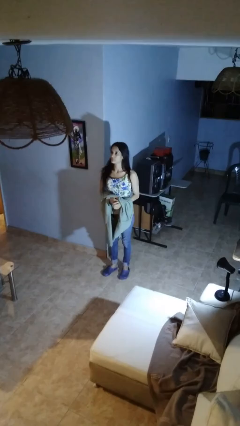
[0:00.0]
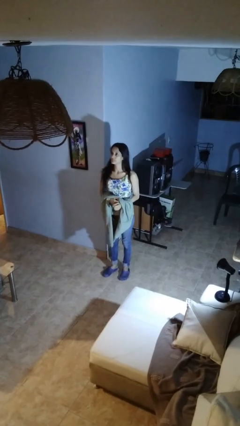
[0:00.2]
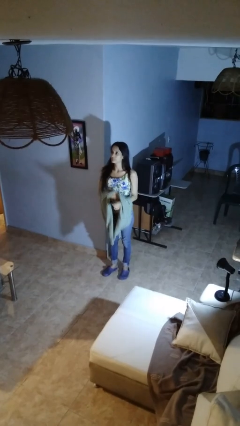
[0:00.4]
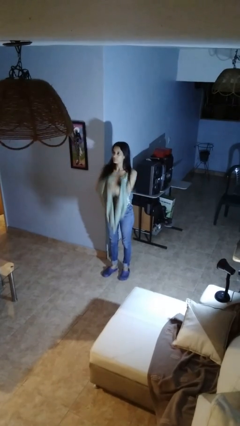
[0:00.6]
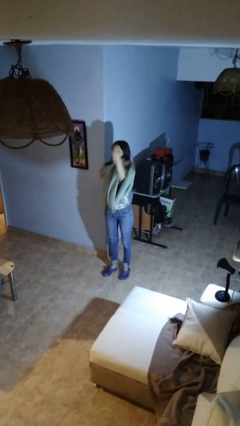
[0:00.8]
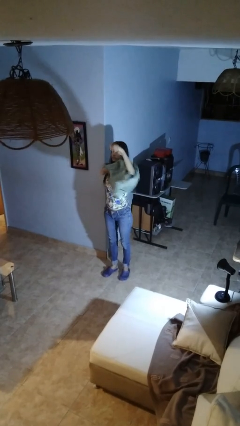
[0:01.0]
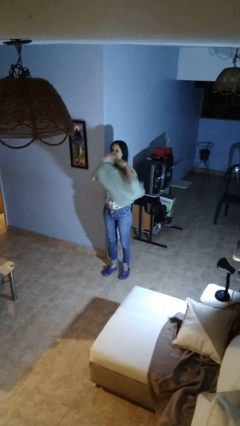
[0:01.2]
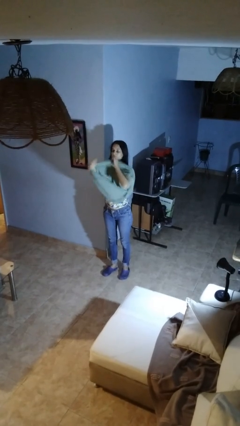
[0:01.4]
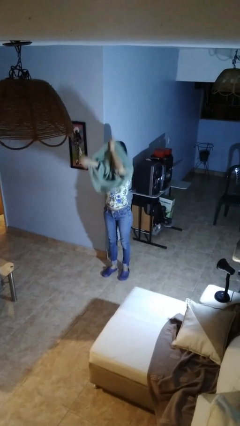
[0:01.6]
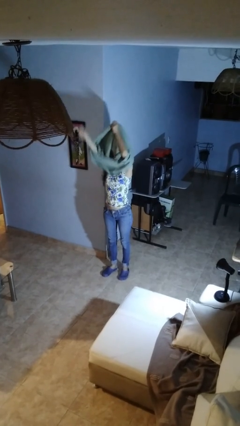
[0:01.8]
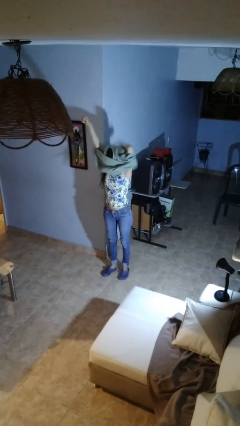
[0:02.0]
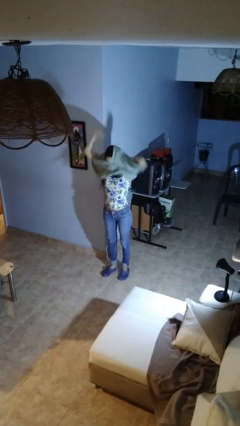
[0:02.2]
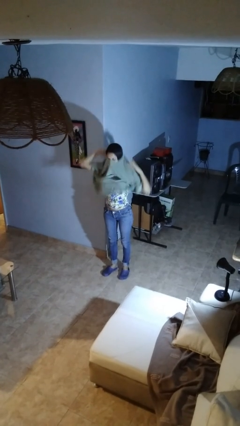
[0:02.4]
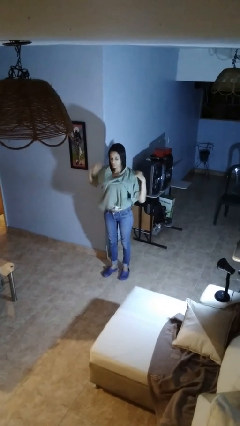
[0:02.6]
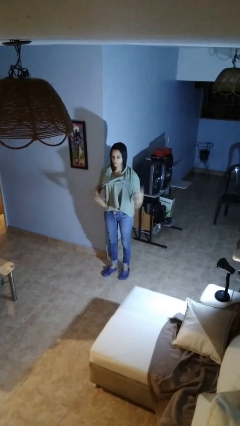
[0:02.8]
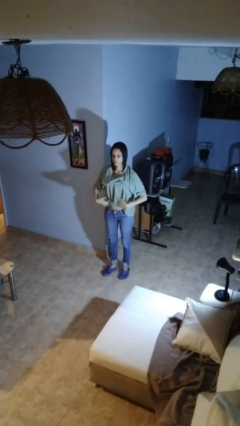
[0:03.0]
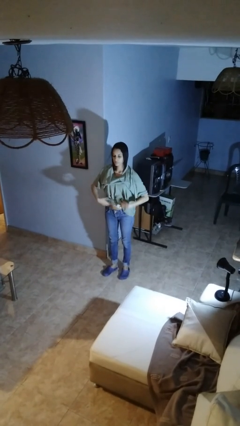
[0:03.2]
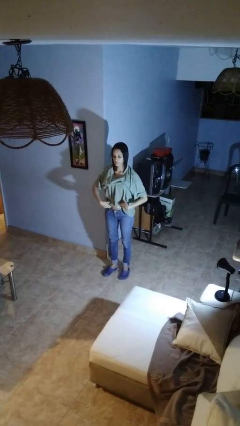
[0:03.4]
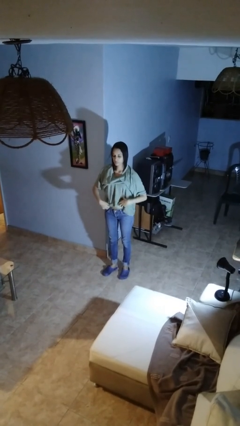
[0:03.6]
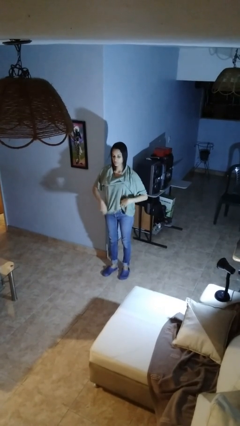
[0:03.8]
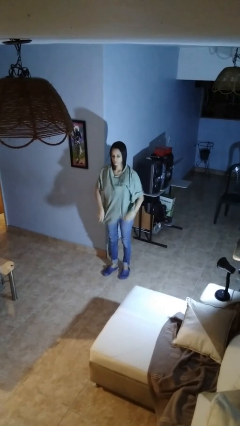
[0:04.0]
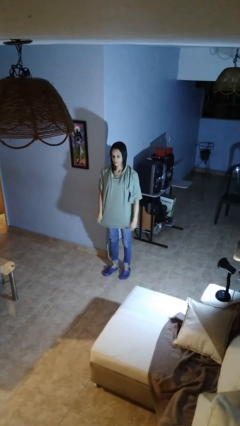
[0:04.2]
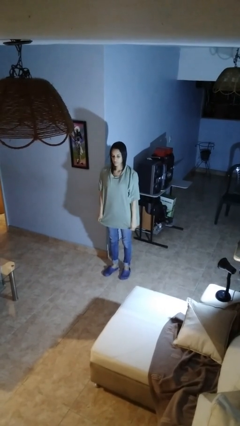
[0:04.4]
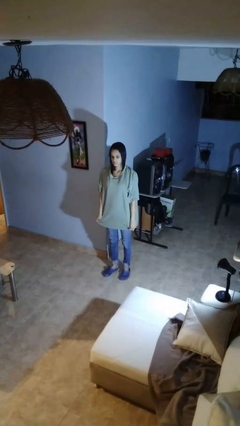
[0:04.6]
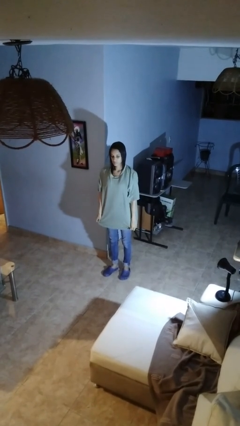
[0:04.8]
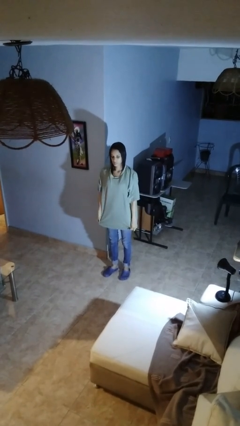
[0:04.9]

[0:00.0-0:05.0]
person puts on shirt

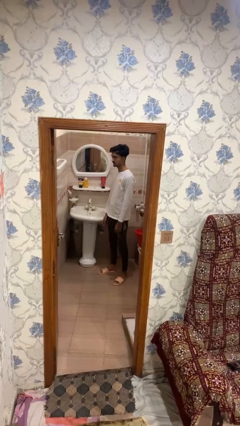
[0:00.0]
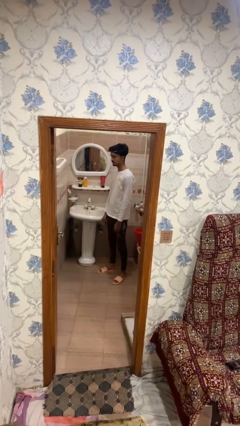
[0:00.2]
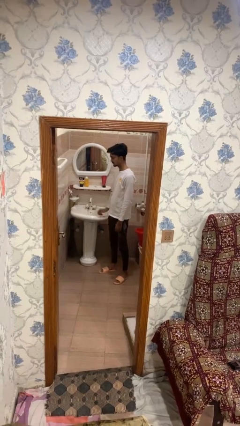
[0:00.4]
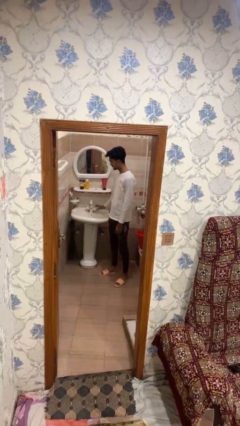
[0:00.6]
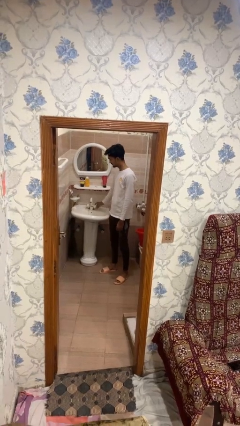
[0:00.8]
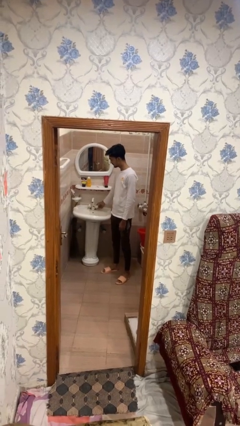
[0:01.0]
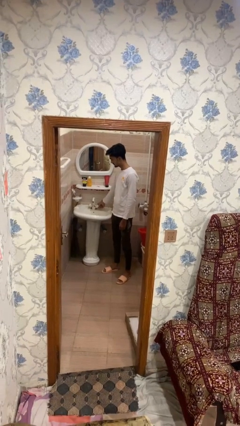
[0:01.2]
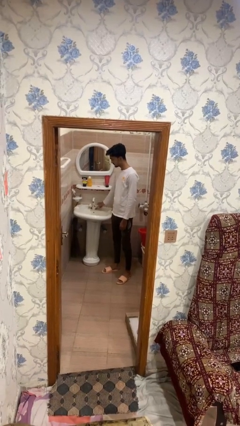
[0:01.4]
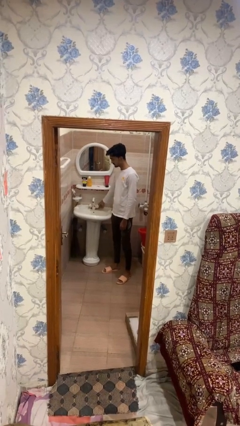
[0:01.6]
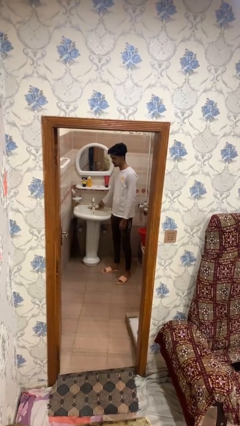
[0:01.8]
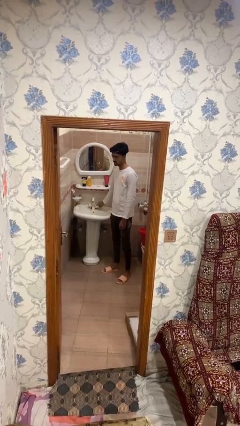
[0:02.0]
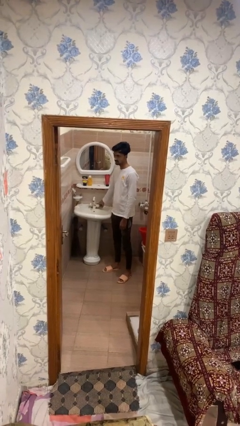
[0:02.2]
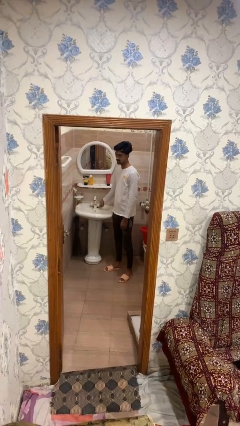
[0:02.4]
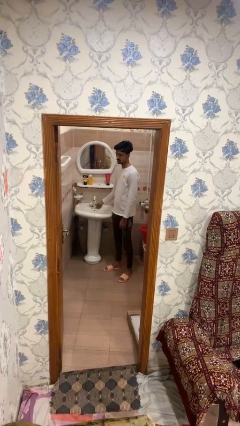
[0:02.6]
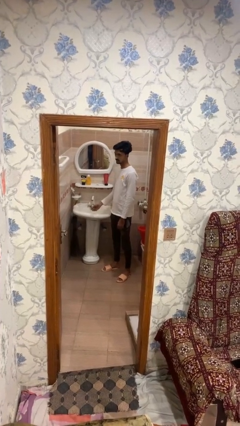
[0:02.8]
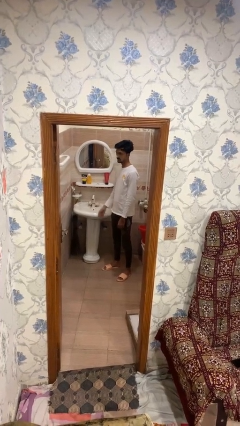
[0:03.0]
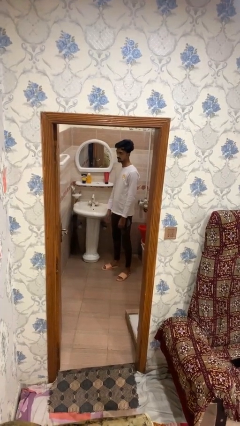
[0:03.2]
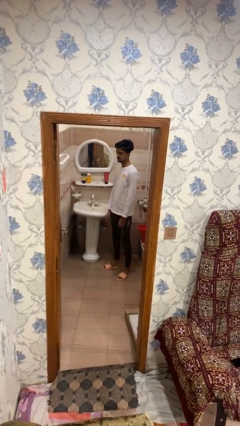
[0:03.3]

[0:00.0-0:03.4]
person turns off faucet

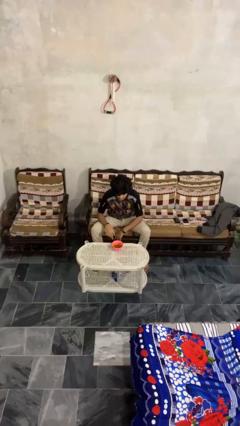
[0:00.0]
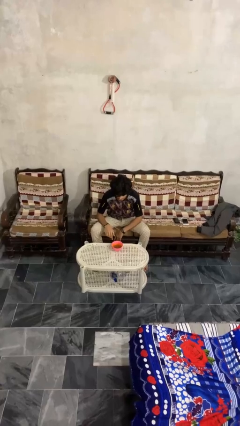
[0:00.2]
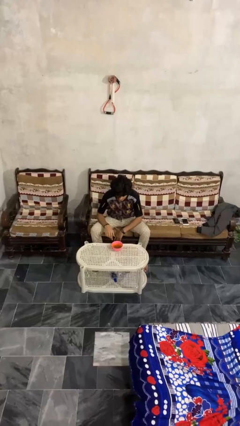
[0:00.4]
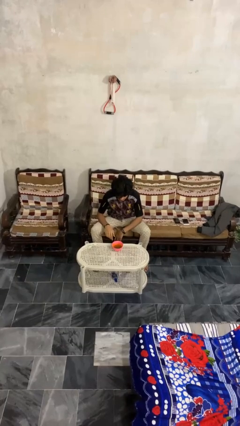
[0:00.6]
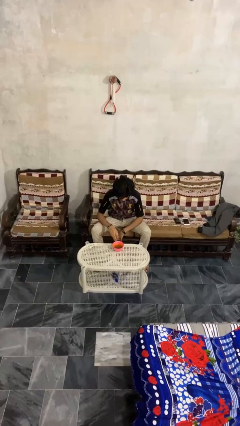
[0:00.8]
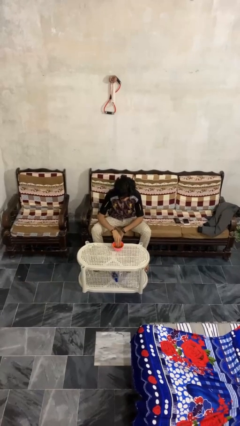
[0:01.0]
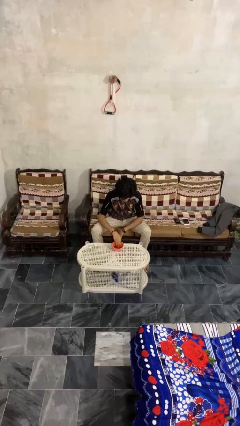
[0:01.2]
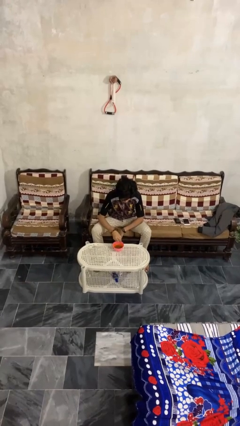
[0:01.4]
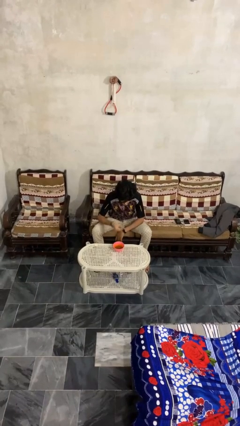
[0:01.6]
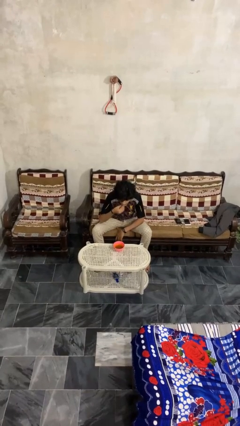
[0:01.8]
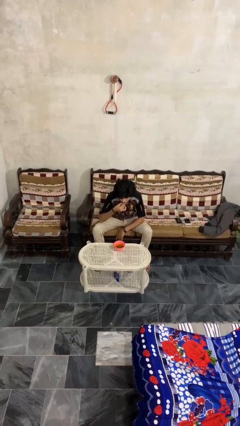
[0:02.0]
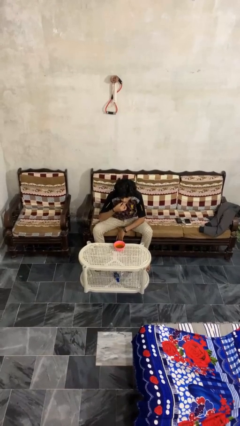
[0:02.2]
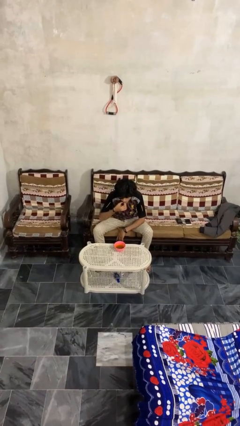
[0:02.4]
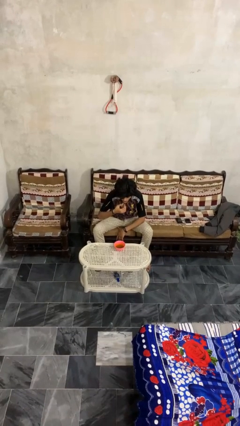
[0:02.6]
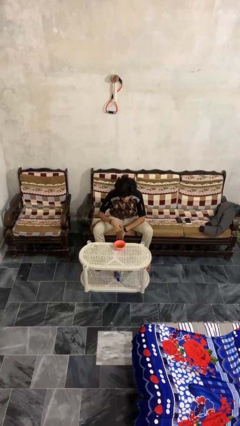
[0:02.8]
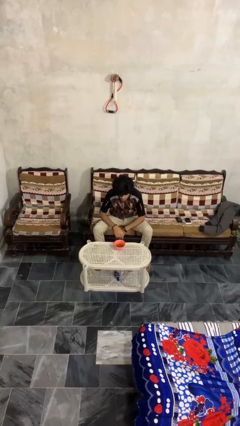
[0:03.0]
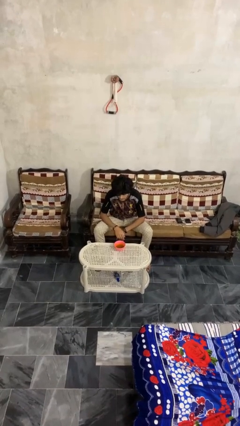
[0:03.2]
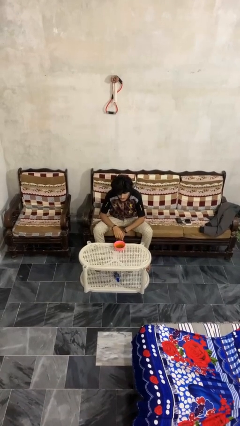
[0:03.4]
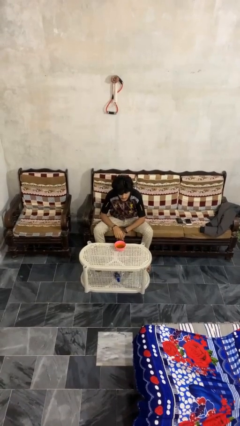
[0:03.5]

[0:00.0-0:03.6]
person eats with hands

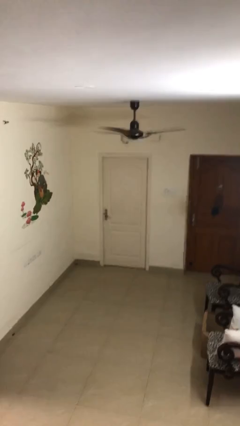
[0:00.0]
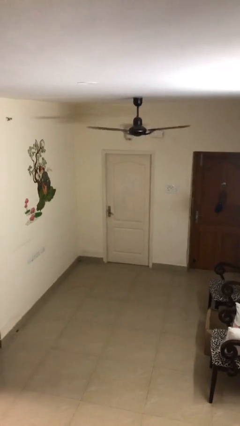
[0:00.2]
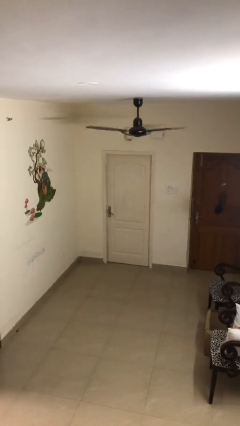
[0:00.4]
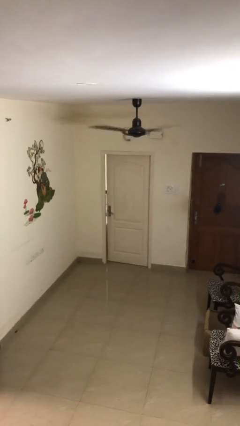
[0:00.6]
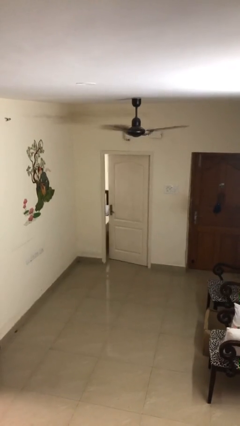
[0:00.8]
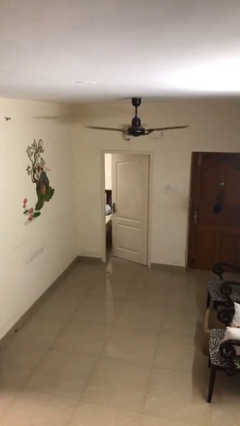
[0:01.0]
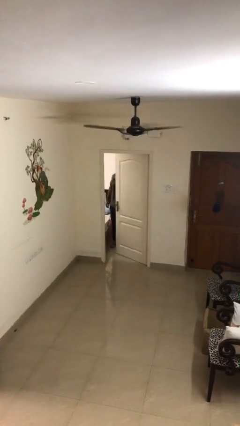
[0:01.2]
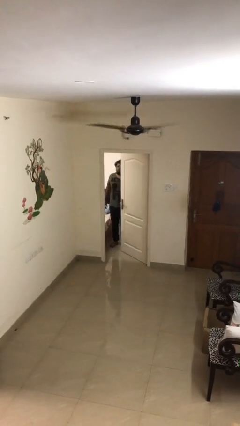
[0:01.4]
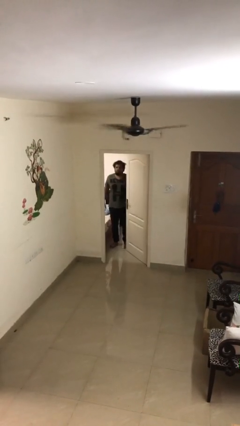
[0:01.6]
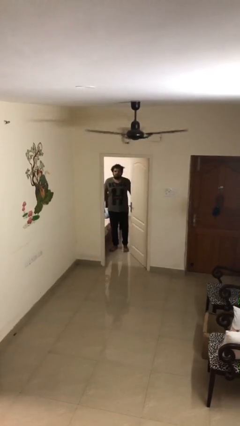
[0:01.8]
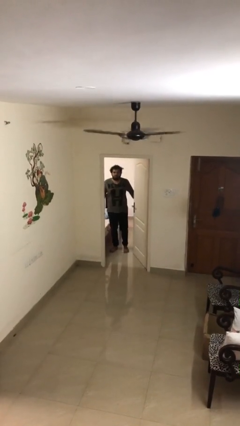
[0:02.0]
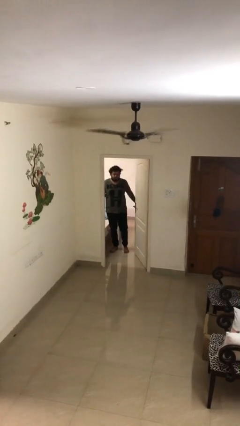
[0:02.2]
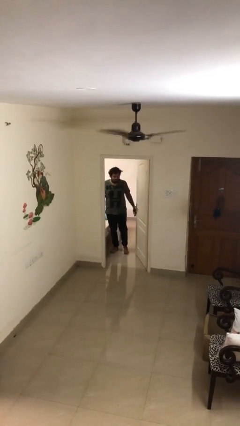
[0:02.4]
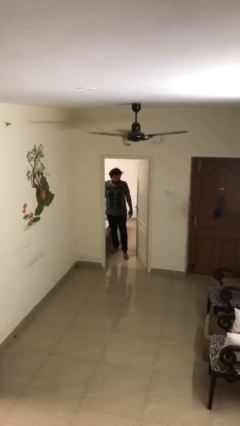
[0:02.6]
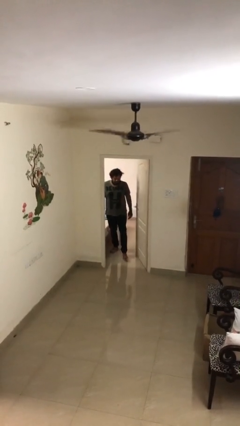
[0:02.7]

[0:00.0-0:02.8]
person opens facility door

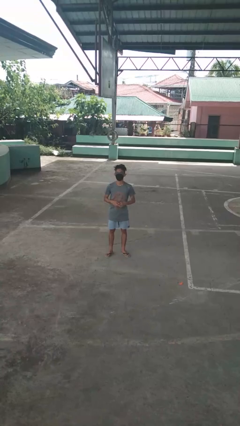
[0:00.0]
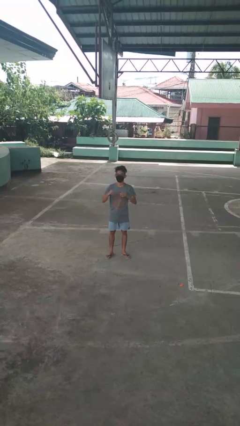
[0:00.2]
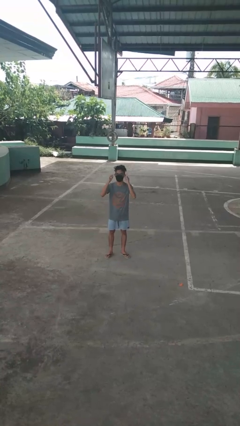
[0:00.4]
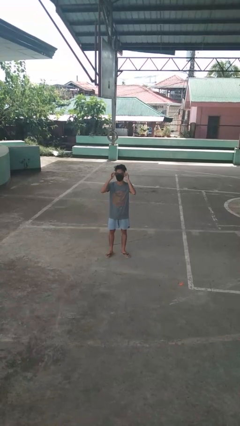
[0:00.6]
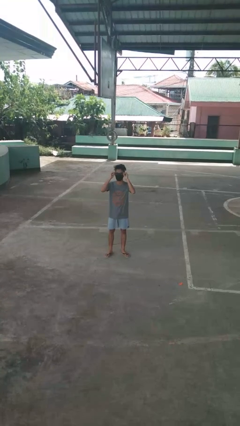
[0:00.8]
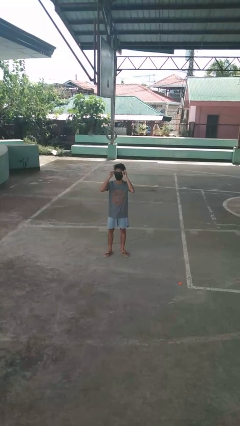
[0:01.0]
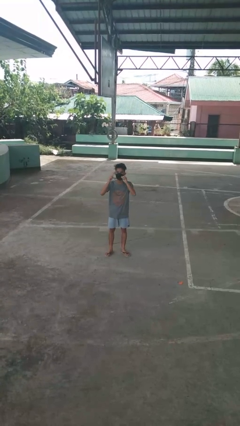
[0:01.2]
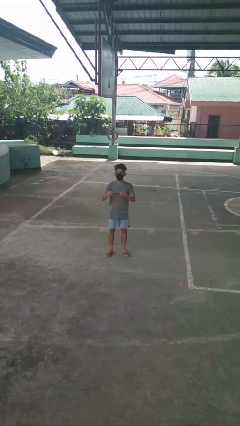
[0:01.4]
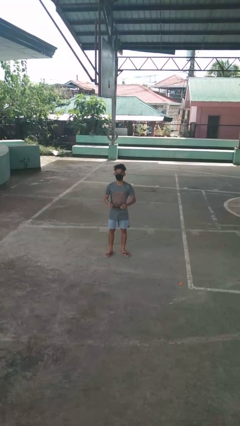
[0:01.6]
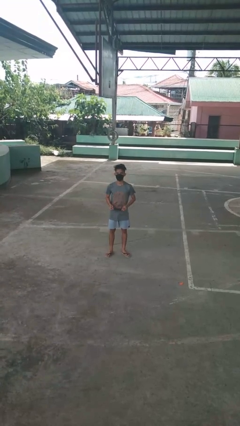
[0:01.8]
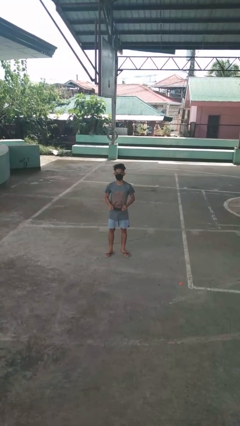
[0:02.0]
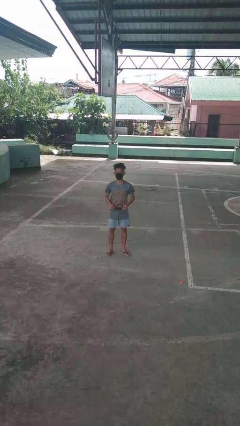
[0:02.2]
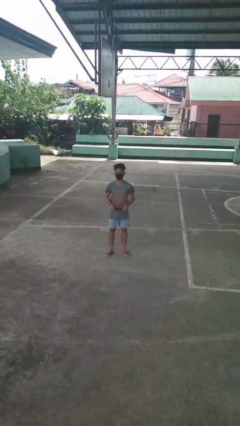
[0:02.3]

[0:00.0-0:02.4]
person takes off glasses

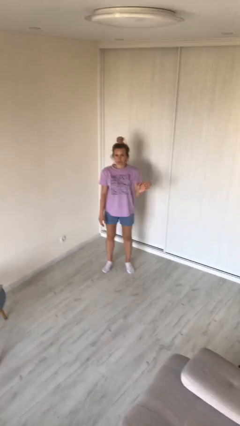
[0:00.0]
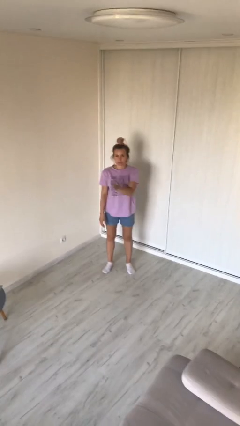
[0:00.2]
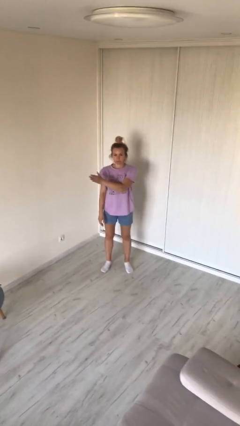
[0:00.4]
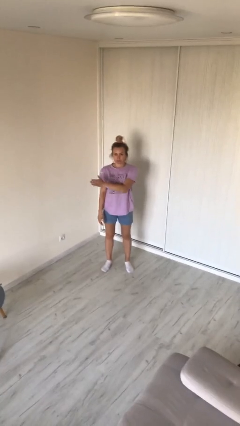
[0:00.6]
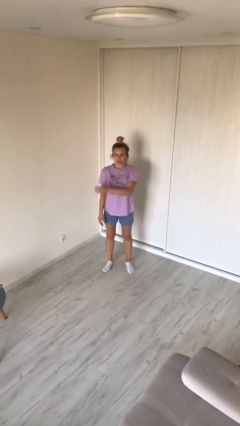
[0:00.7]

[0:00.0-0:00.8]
person gestures swipe right
